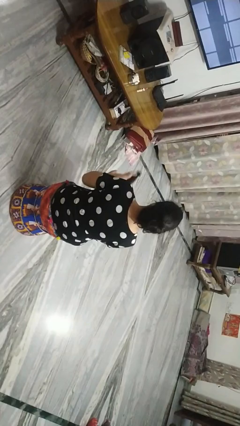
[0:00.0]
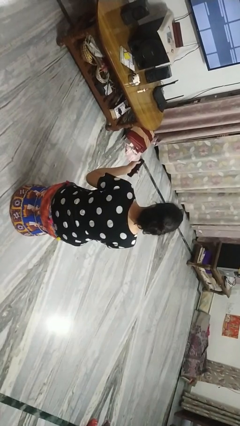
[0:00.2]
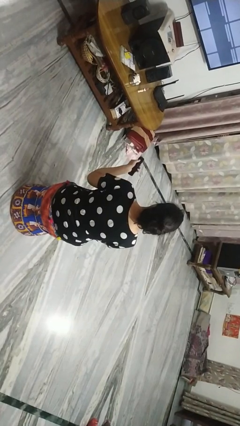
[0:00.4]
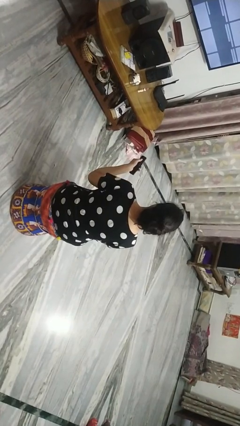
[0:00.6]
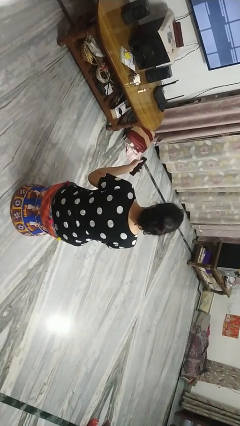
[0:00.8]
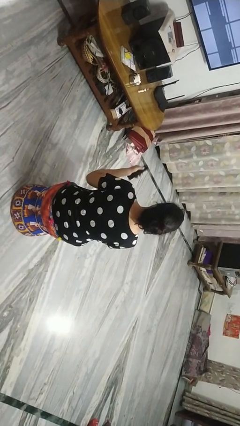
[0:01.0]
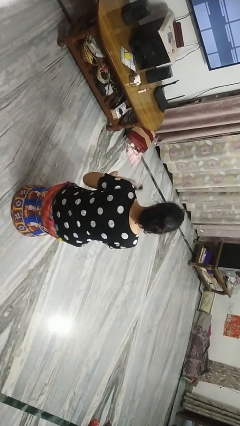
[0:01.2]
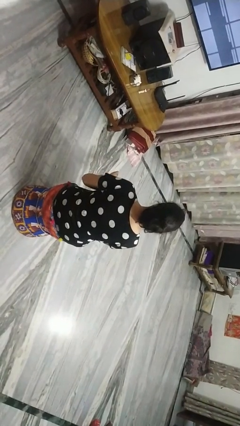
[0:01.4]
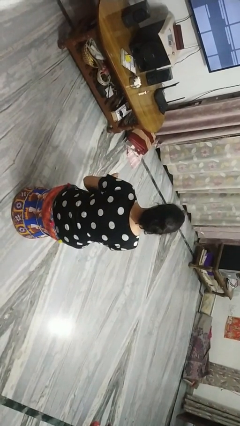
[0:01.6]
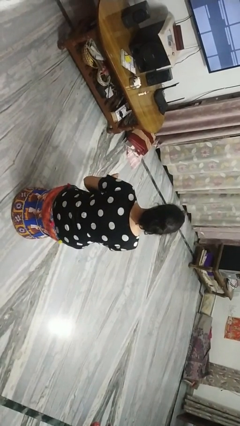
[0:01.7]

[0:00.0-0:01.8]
person uses television remote

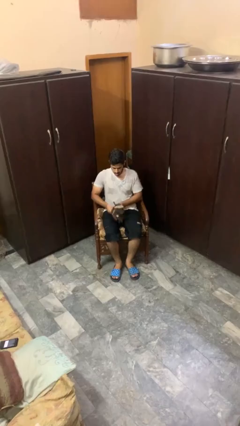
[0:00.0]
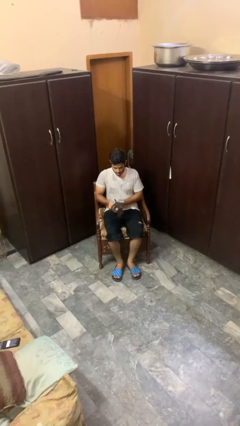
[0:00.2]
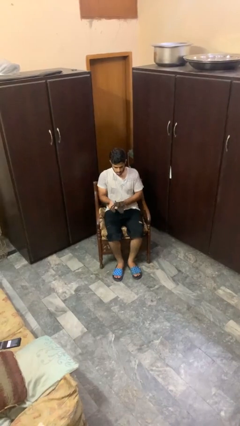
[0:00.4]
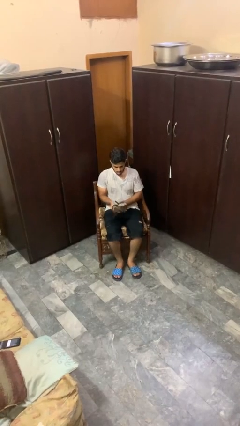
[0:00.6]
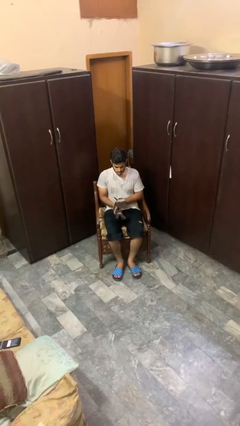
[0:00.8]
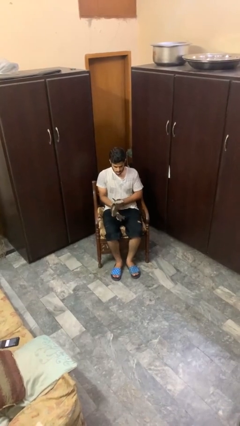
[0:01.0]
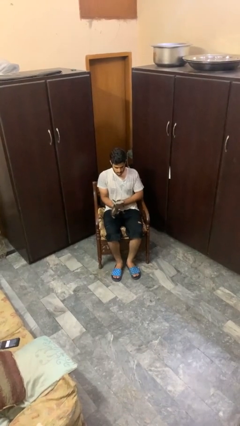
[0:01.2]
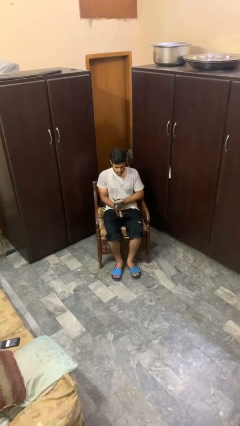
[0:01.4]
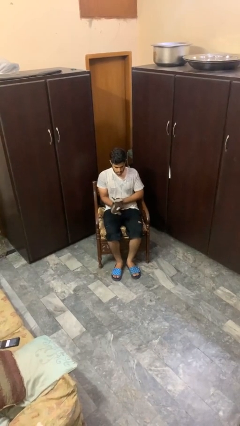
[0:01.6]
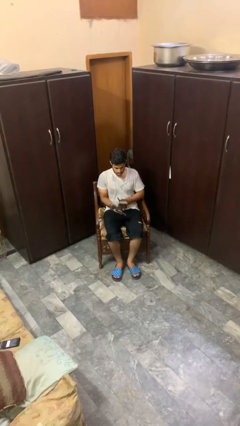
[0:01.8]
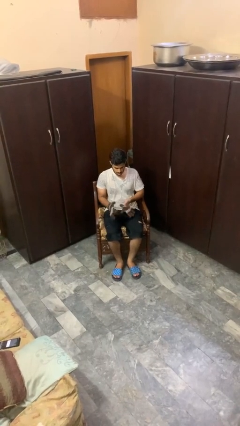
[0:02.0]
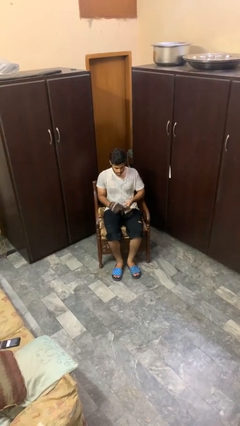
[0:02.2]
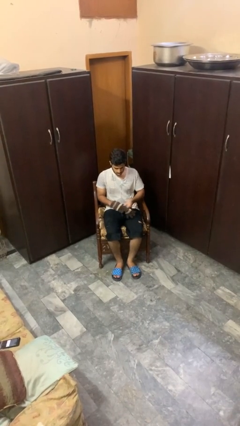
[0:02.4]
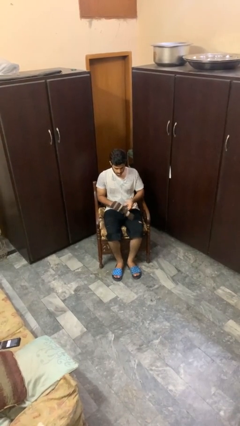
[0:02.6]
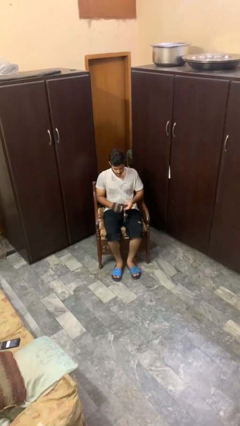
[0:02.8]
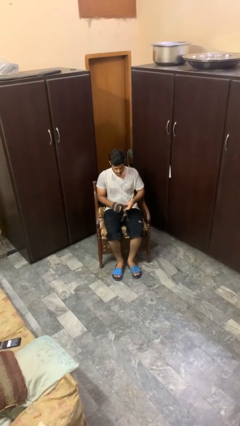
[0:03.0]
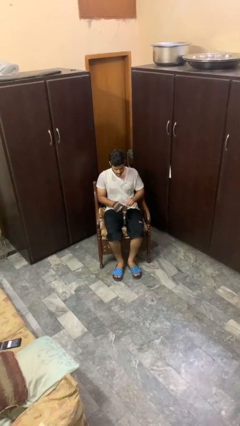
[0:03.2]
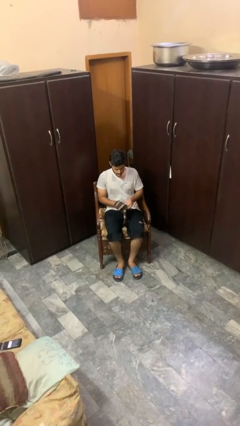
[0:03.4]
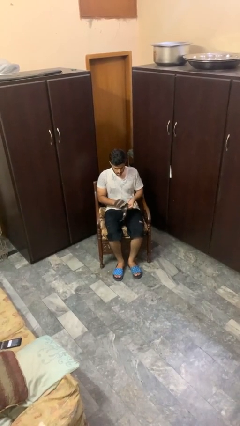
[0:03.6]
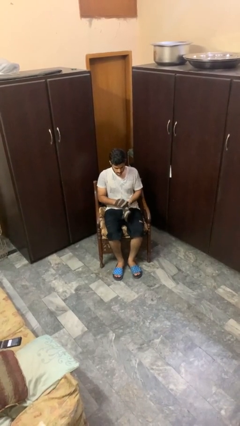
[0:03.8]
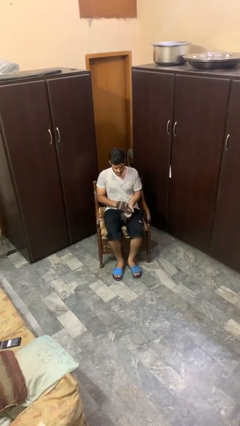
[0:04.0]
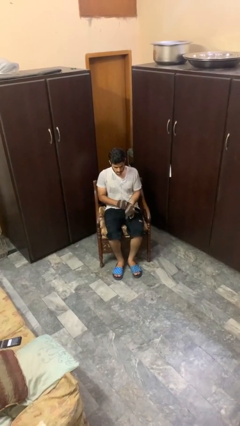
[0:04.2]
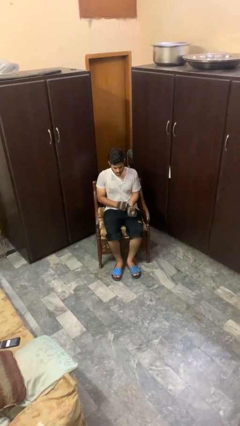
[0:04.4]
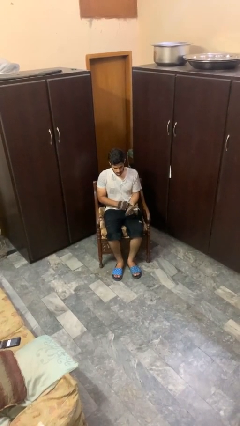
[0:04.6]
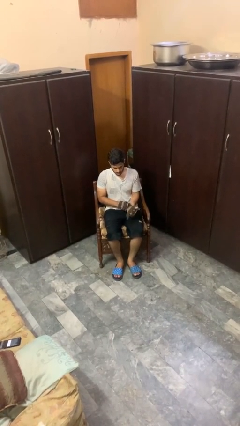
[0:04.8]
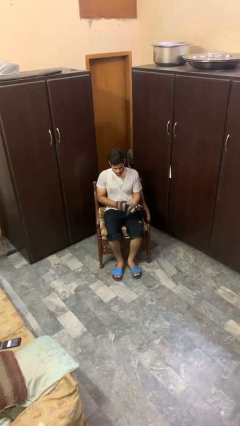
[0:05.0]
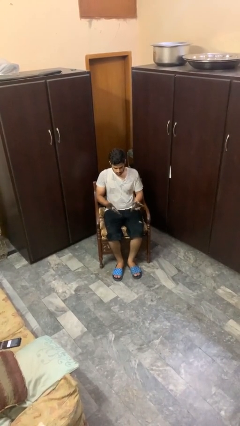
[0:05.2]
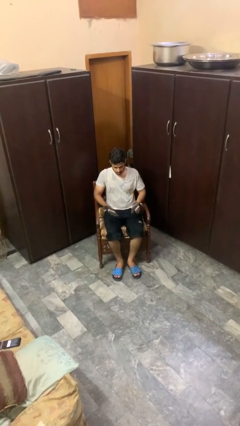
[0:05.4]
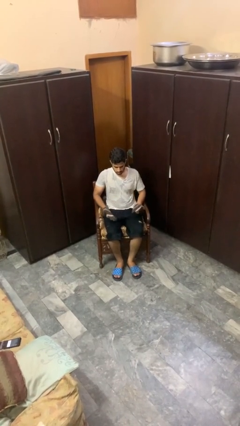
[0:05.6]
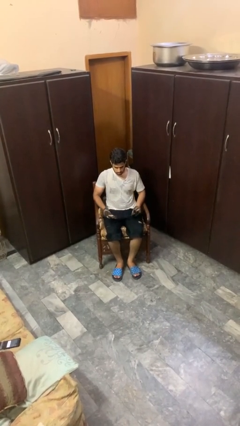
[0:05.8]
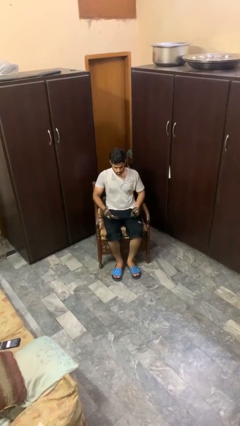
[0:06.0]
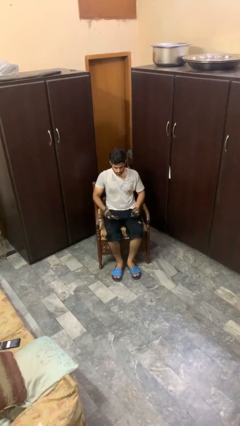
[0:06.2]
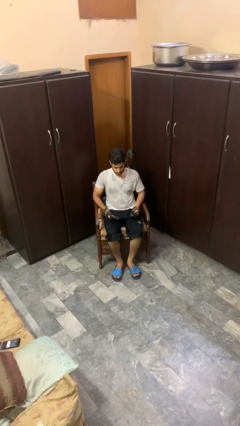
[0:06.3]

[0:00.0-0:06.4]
person puts on gloves

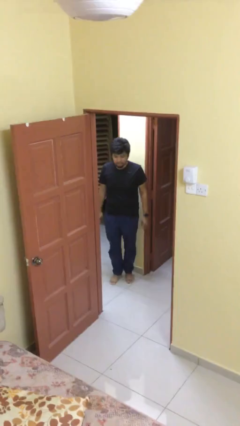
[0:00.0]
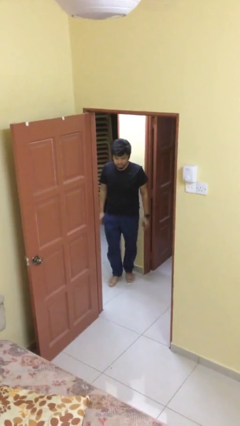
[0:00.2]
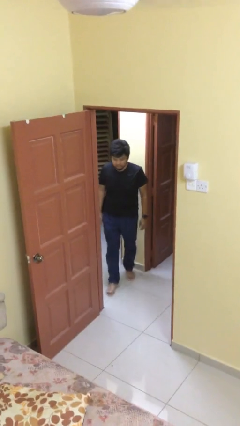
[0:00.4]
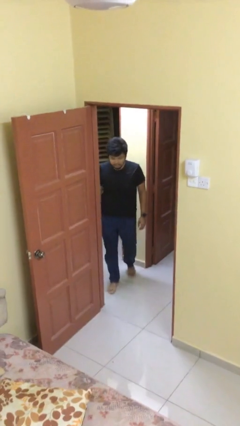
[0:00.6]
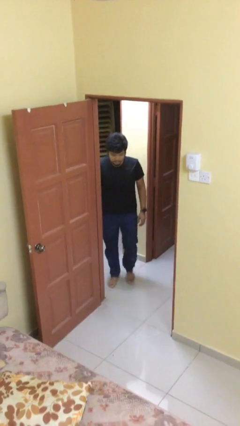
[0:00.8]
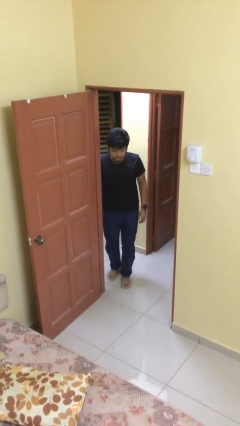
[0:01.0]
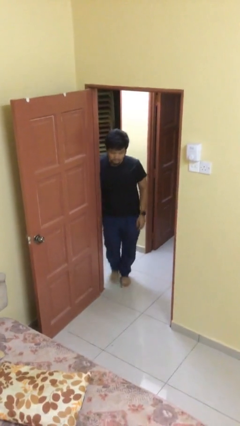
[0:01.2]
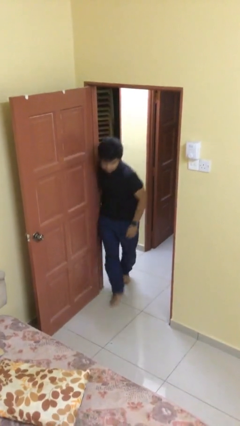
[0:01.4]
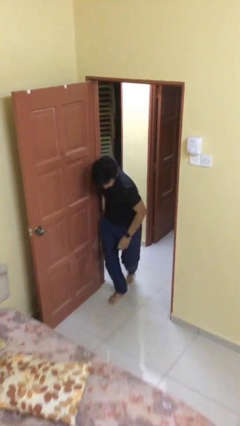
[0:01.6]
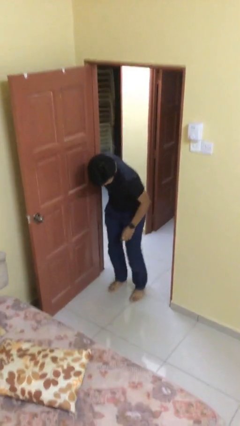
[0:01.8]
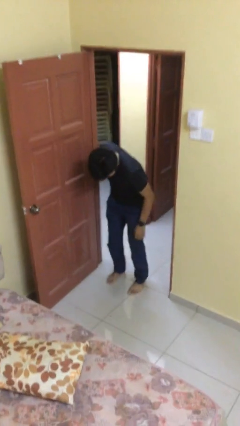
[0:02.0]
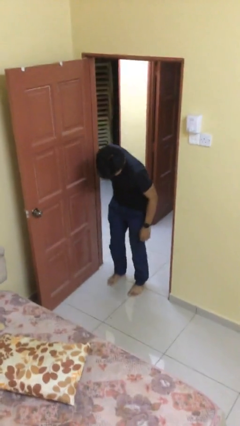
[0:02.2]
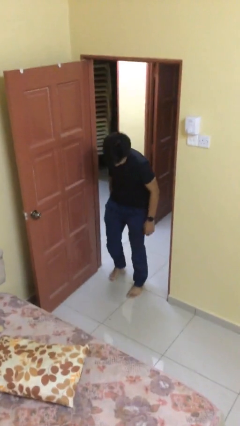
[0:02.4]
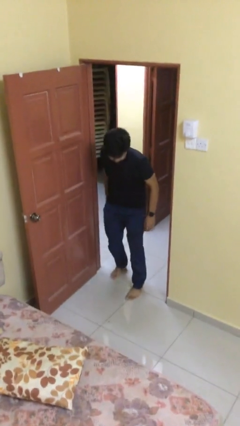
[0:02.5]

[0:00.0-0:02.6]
person bumps into wall

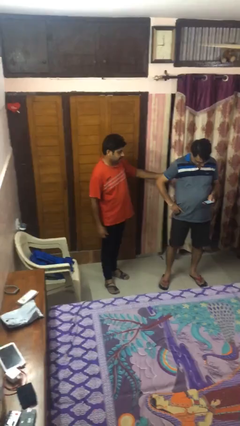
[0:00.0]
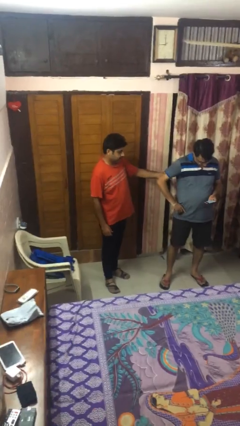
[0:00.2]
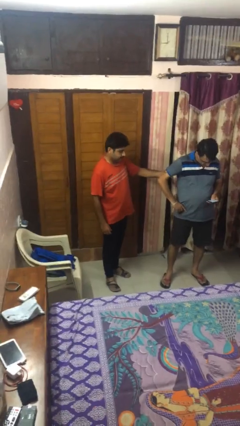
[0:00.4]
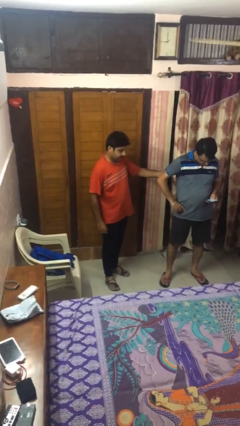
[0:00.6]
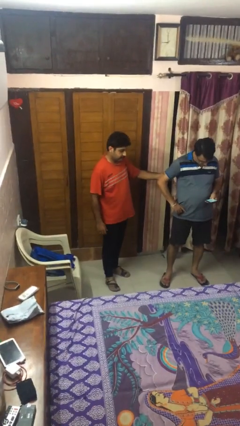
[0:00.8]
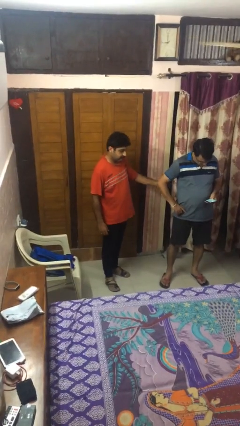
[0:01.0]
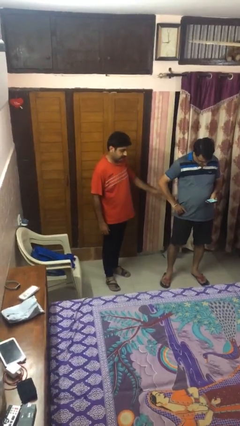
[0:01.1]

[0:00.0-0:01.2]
person grabs person by bicep

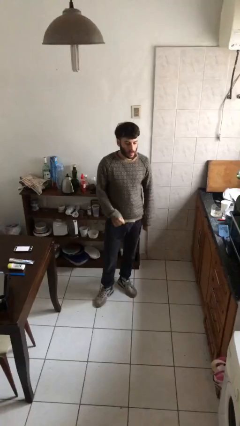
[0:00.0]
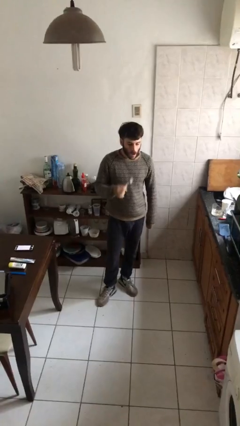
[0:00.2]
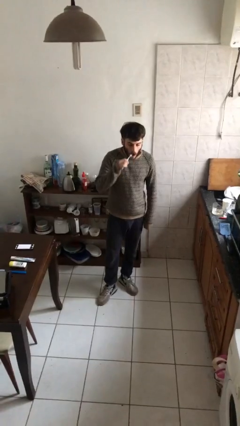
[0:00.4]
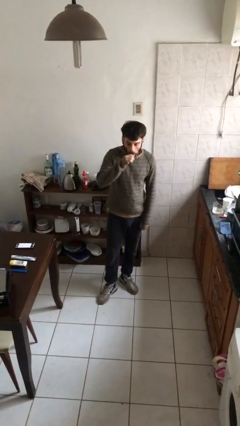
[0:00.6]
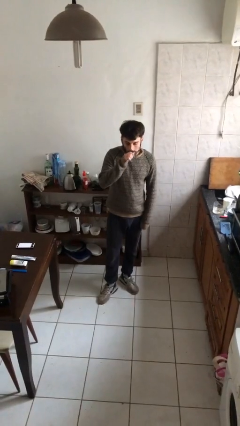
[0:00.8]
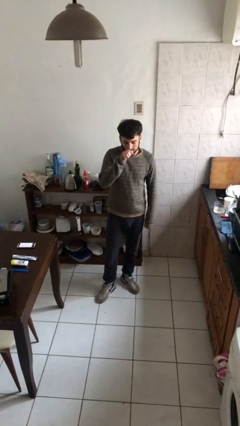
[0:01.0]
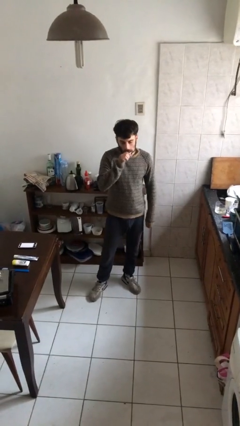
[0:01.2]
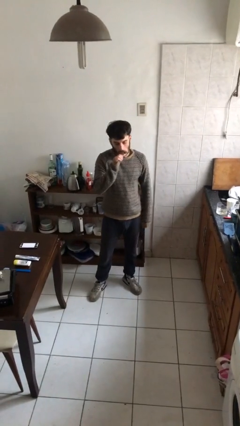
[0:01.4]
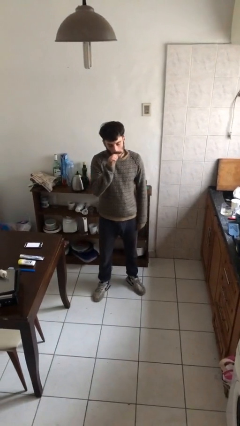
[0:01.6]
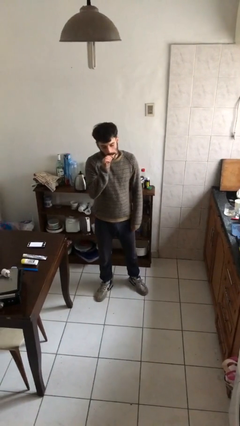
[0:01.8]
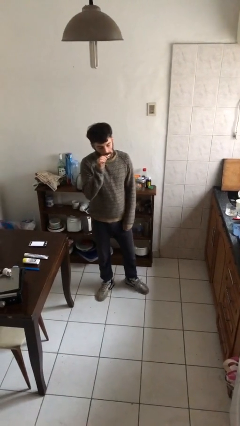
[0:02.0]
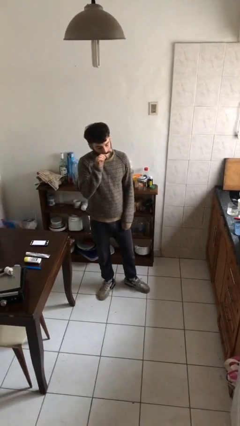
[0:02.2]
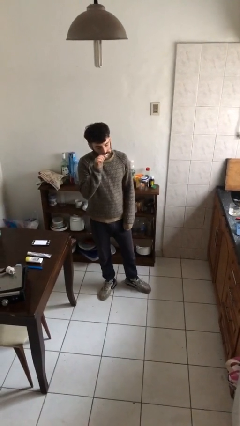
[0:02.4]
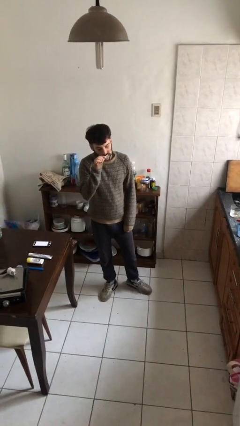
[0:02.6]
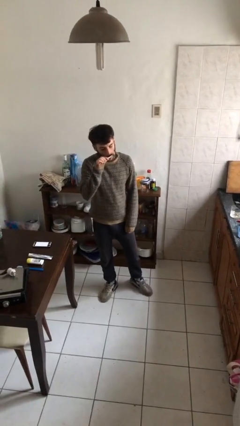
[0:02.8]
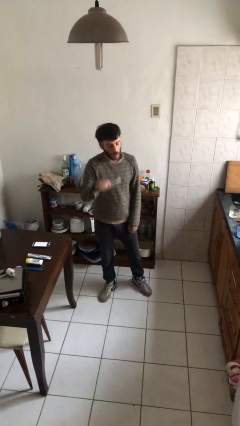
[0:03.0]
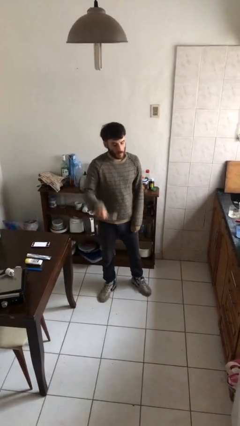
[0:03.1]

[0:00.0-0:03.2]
person brushes teeth

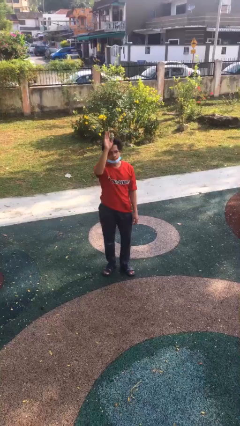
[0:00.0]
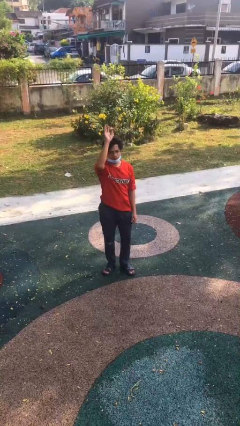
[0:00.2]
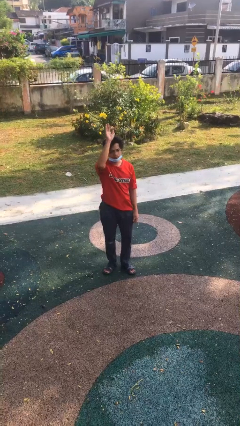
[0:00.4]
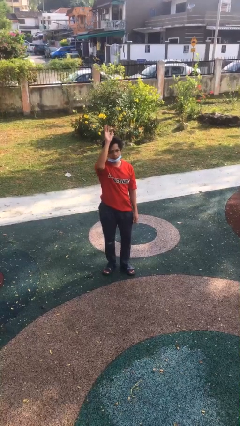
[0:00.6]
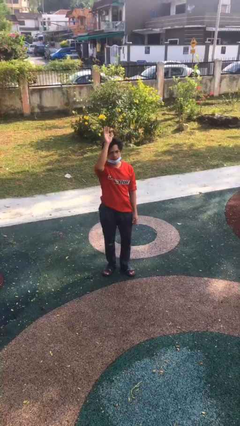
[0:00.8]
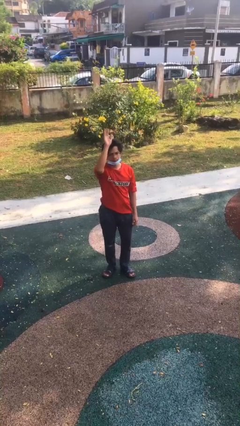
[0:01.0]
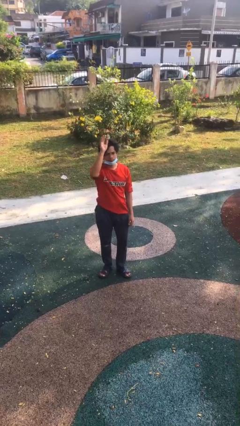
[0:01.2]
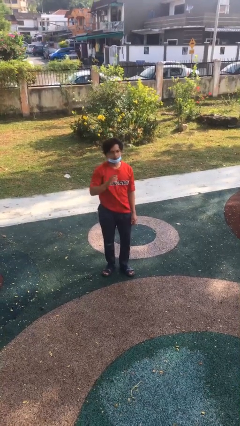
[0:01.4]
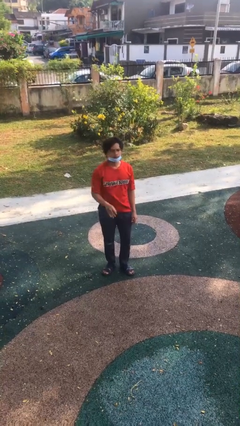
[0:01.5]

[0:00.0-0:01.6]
person gestures raise hand

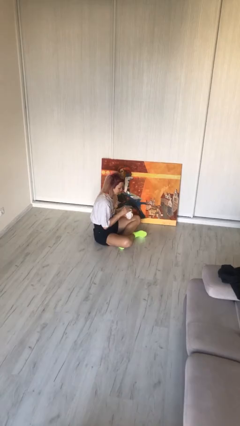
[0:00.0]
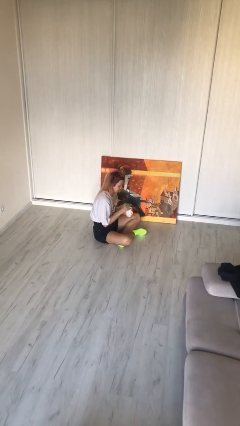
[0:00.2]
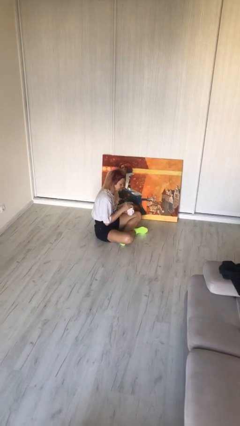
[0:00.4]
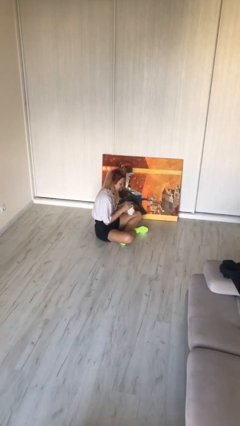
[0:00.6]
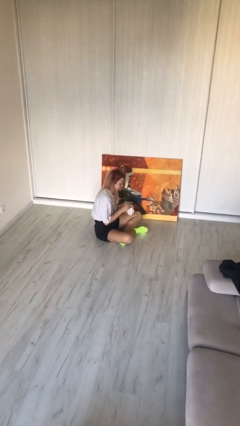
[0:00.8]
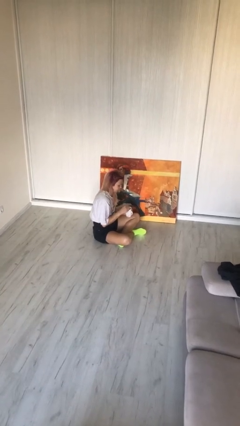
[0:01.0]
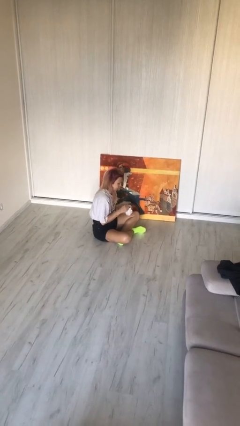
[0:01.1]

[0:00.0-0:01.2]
person stirs mug
